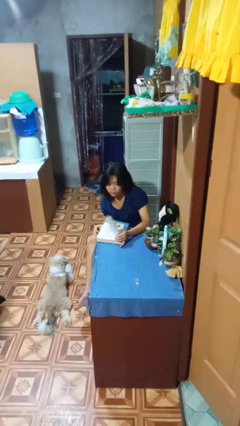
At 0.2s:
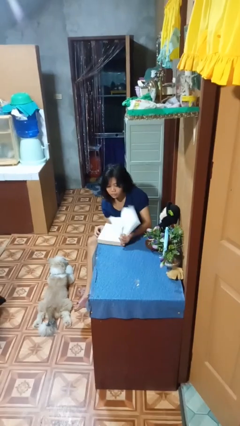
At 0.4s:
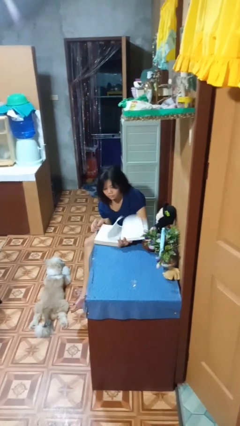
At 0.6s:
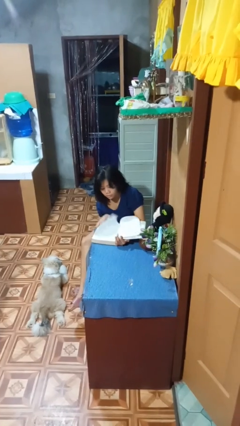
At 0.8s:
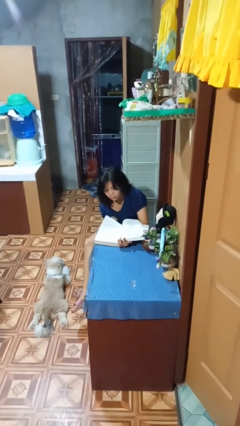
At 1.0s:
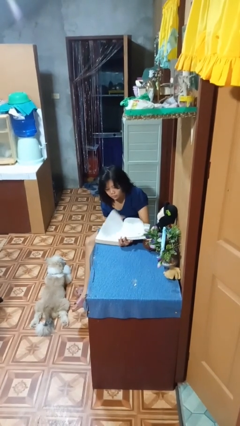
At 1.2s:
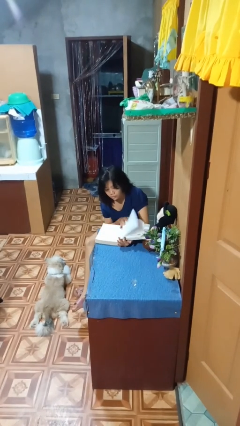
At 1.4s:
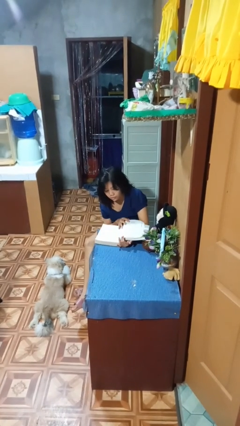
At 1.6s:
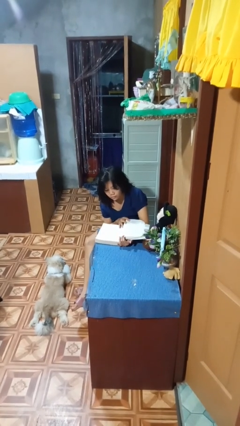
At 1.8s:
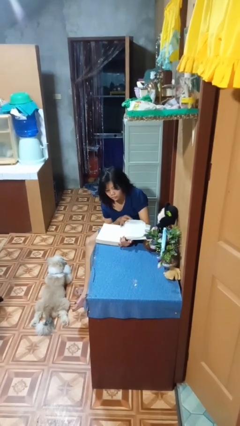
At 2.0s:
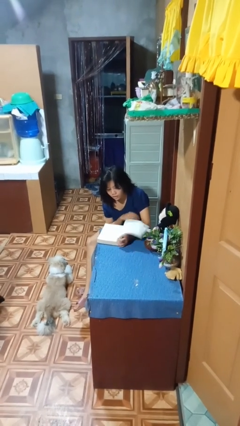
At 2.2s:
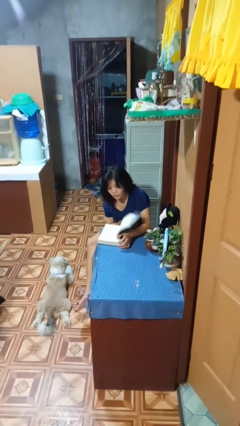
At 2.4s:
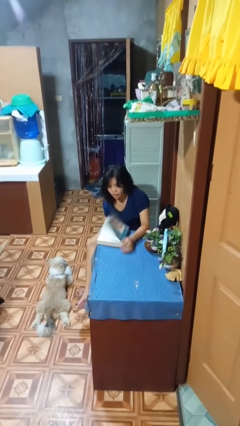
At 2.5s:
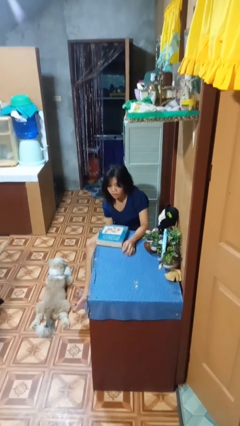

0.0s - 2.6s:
person reads book

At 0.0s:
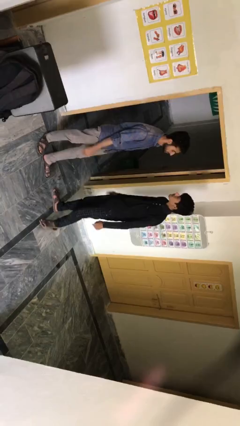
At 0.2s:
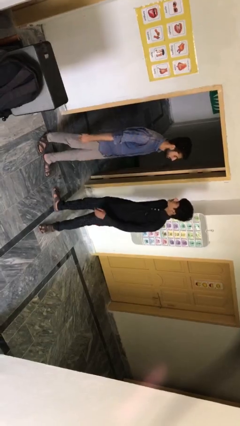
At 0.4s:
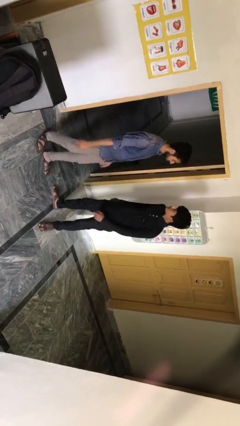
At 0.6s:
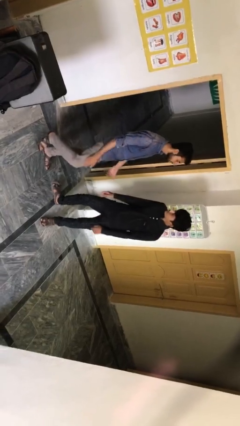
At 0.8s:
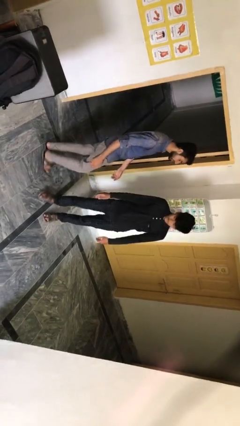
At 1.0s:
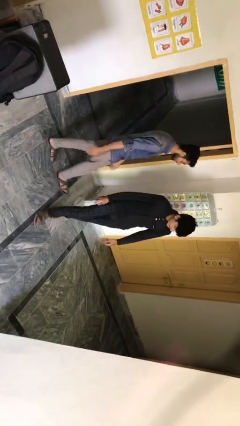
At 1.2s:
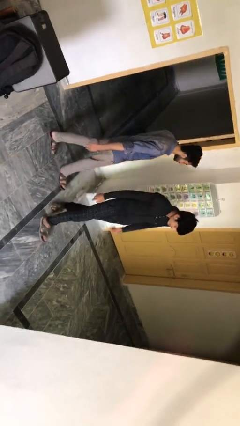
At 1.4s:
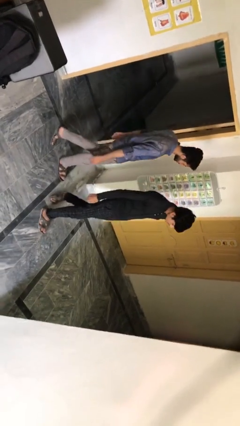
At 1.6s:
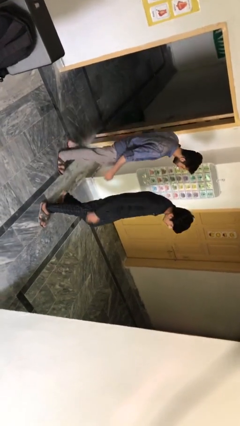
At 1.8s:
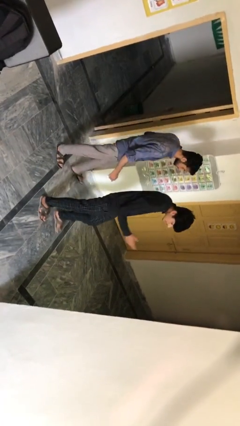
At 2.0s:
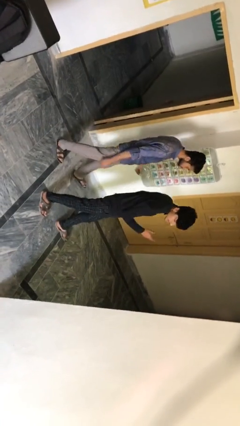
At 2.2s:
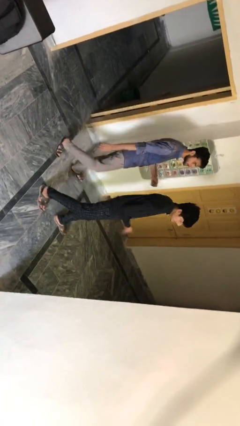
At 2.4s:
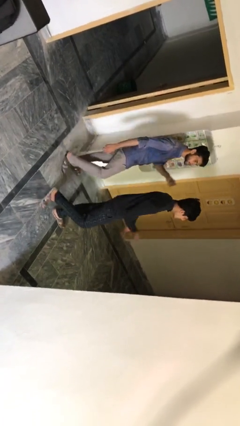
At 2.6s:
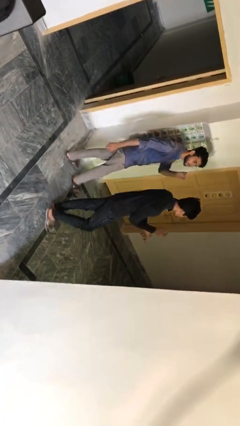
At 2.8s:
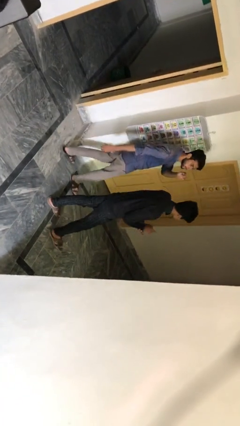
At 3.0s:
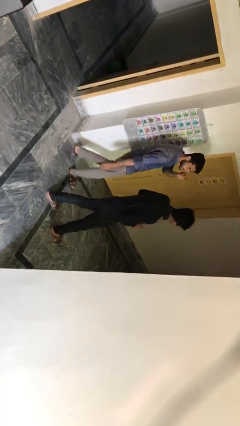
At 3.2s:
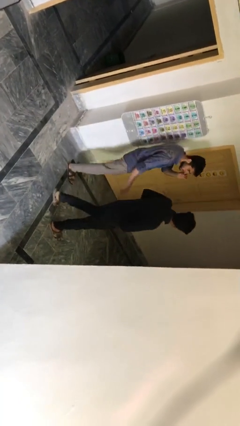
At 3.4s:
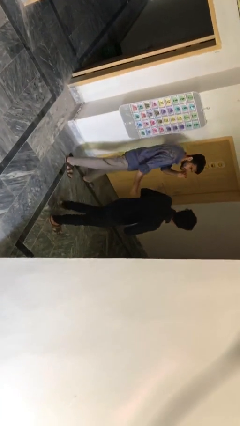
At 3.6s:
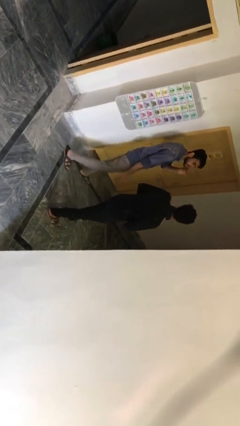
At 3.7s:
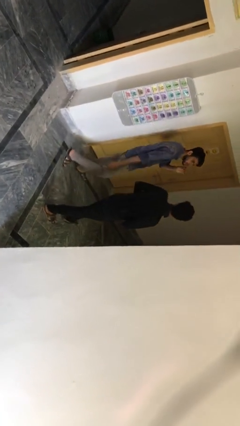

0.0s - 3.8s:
person talks to person

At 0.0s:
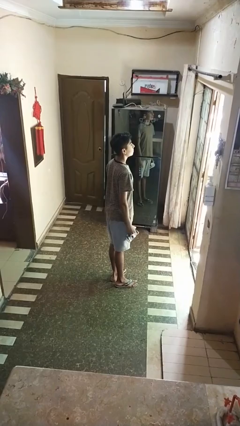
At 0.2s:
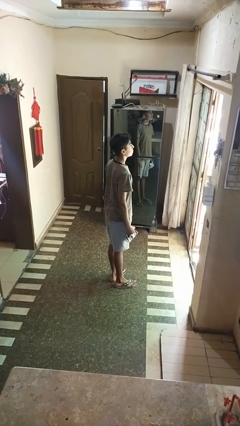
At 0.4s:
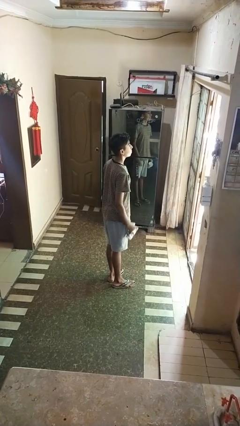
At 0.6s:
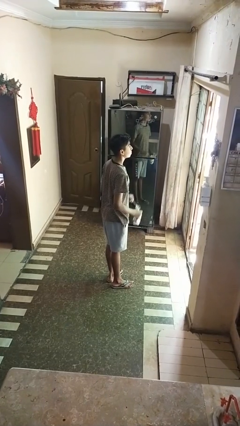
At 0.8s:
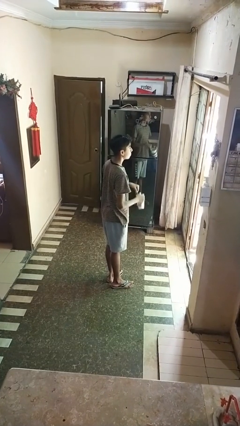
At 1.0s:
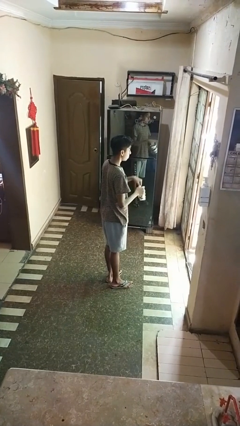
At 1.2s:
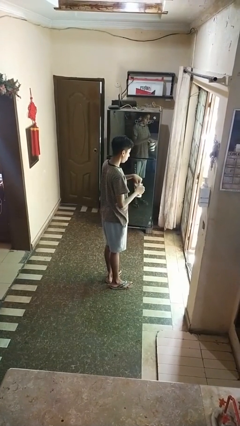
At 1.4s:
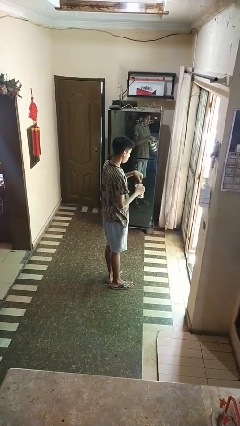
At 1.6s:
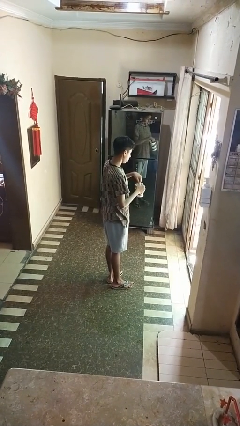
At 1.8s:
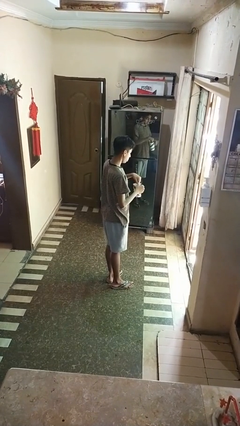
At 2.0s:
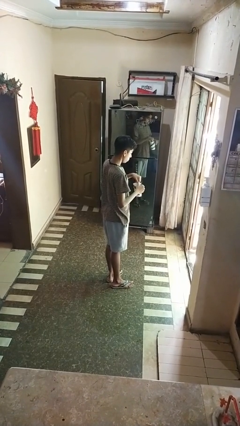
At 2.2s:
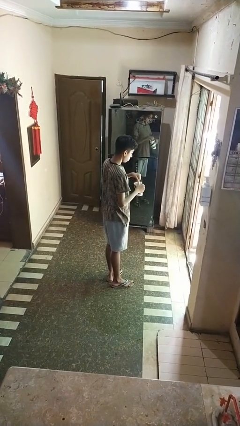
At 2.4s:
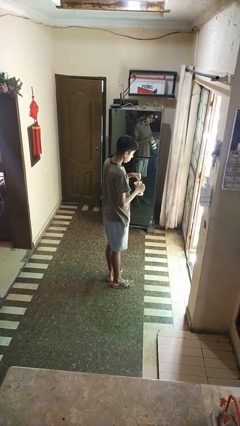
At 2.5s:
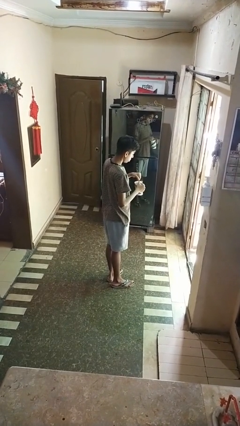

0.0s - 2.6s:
person stirs mug

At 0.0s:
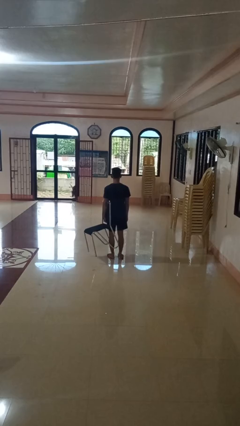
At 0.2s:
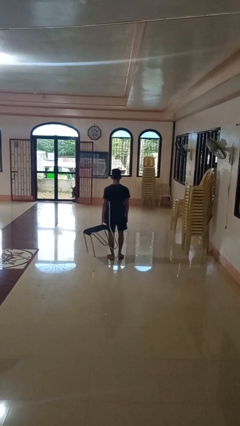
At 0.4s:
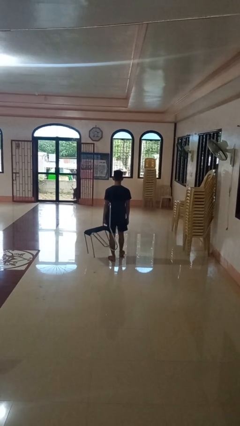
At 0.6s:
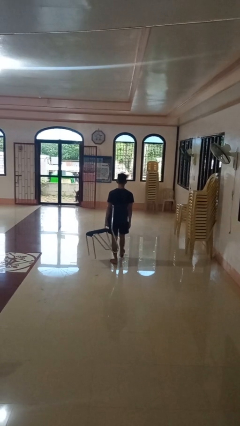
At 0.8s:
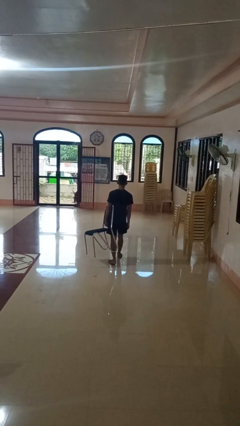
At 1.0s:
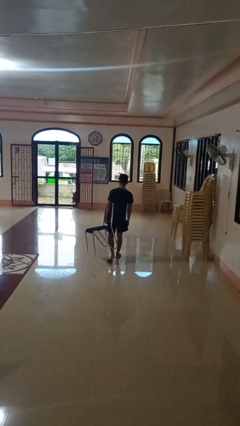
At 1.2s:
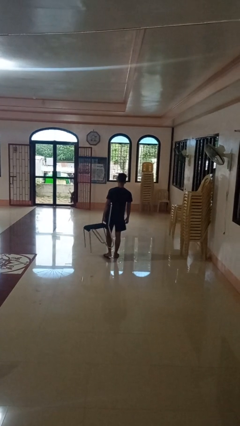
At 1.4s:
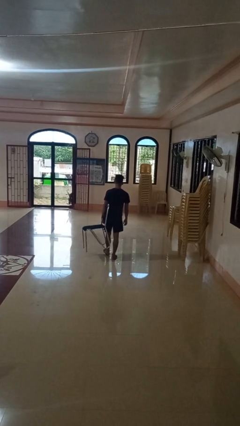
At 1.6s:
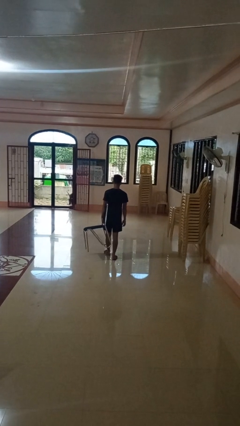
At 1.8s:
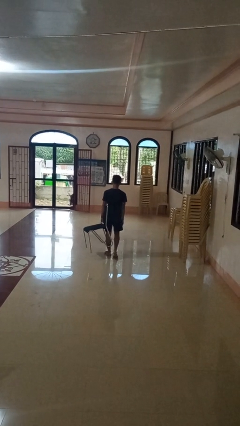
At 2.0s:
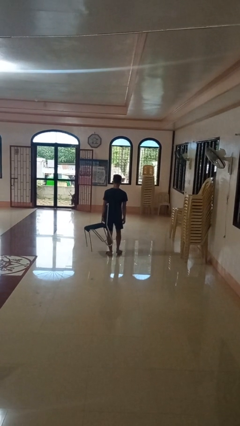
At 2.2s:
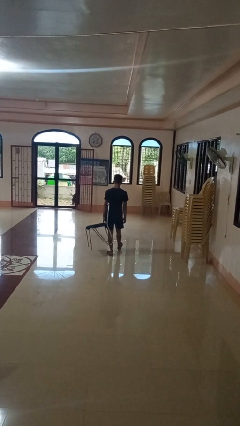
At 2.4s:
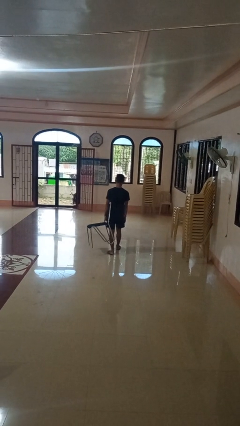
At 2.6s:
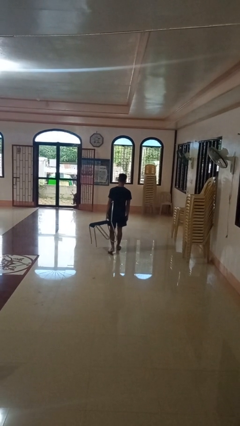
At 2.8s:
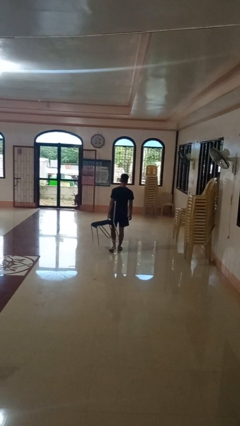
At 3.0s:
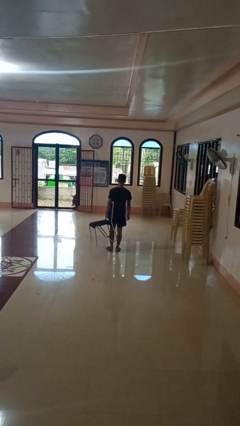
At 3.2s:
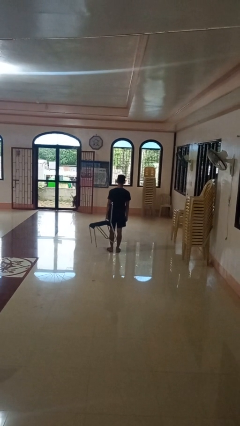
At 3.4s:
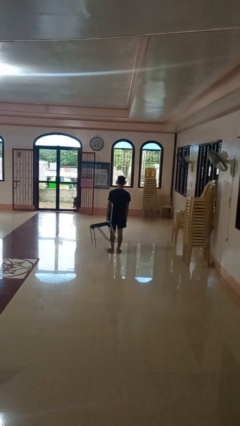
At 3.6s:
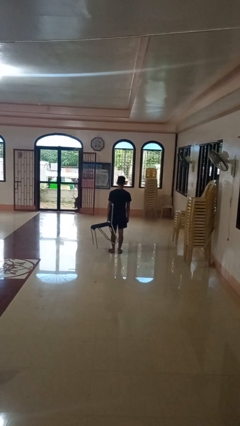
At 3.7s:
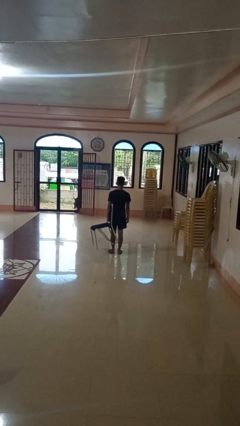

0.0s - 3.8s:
person carries furniture

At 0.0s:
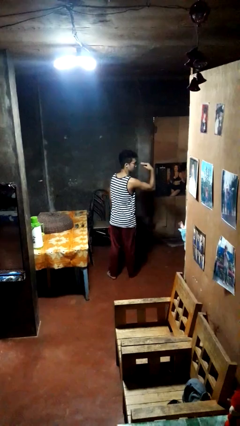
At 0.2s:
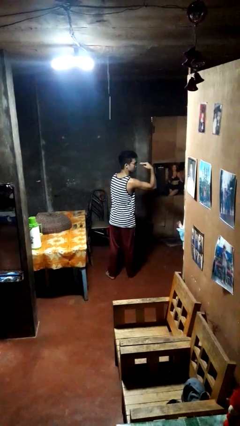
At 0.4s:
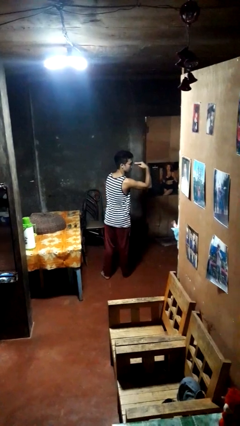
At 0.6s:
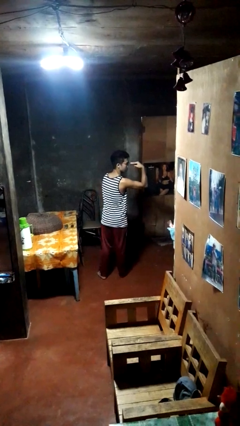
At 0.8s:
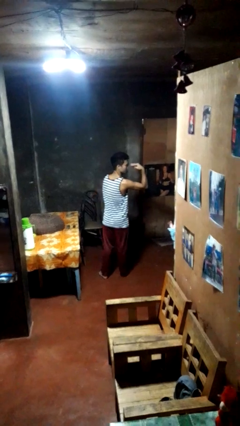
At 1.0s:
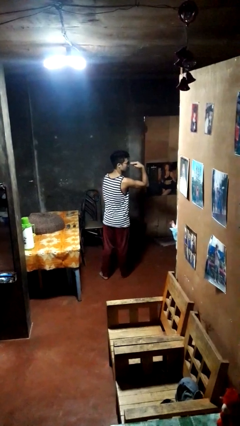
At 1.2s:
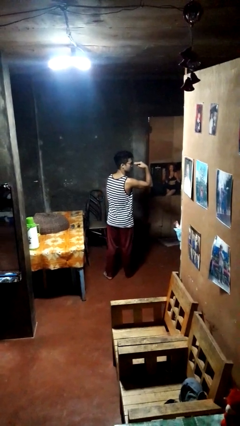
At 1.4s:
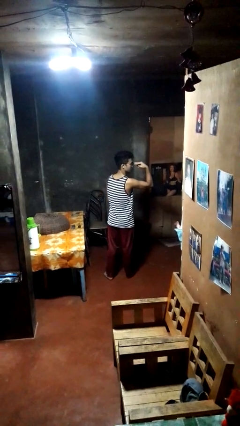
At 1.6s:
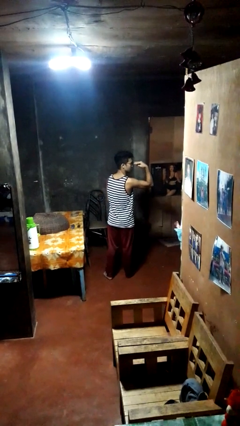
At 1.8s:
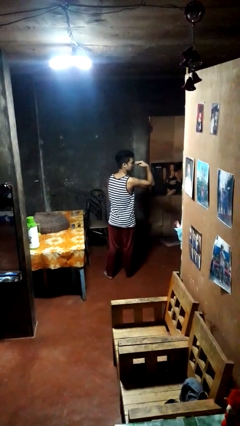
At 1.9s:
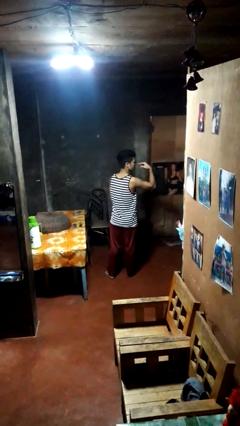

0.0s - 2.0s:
person gestures watch closely

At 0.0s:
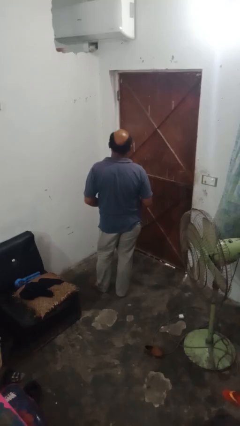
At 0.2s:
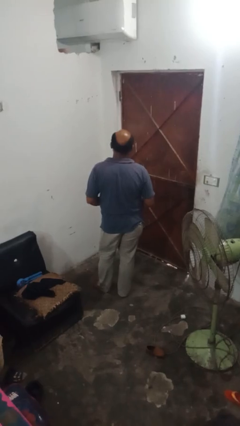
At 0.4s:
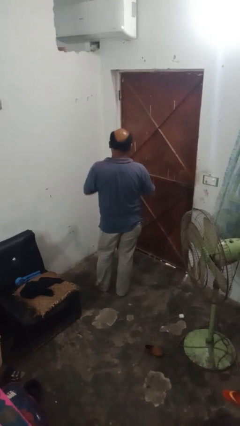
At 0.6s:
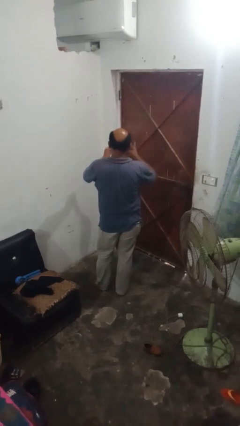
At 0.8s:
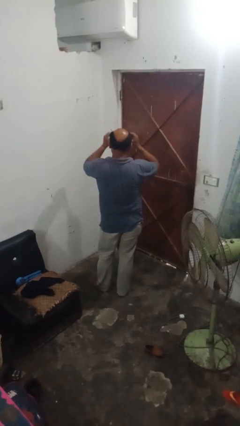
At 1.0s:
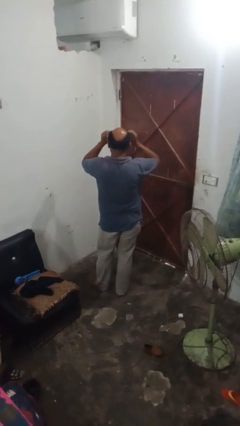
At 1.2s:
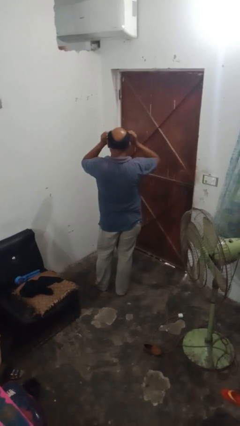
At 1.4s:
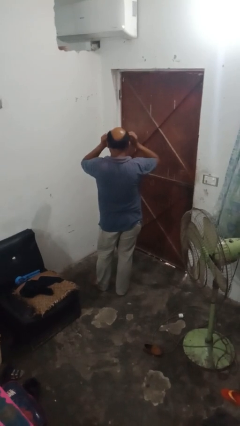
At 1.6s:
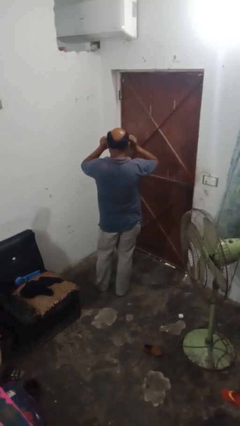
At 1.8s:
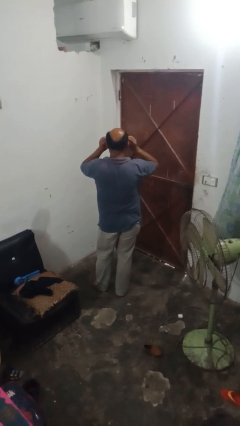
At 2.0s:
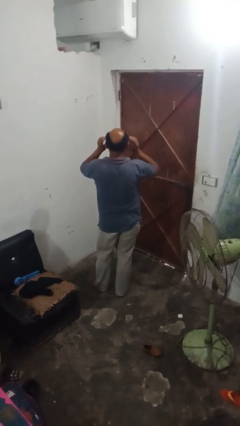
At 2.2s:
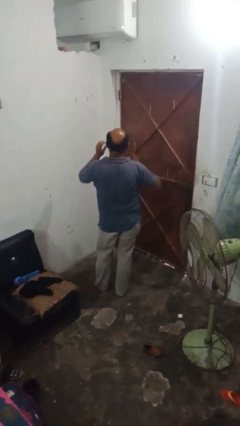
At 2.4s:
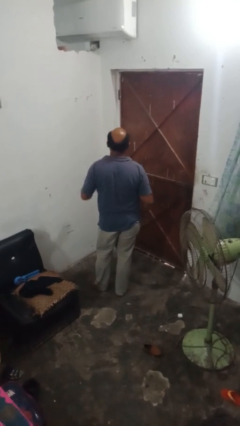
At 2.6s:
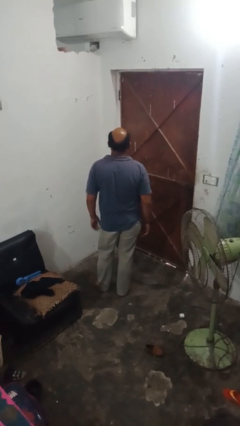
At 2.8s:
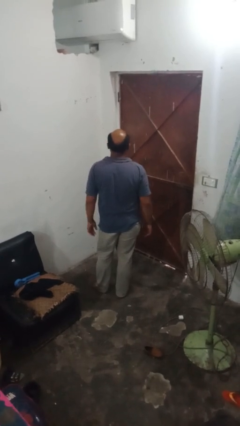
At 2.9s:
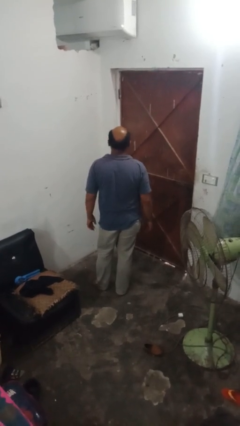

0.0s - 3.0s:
person puts on sunglasses
